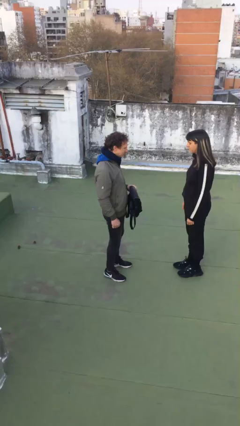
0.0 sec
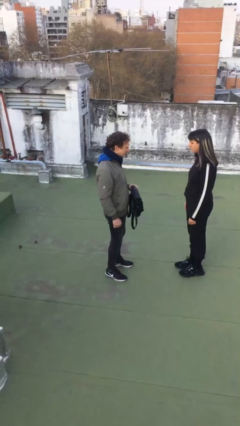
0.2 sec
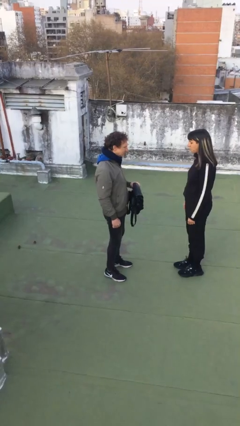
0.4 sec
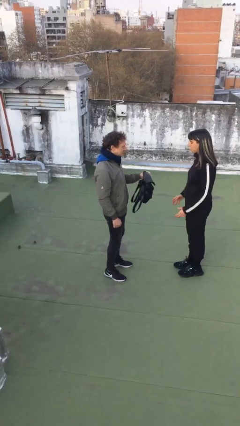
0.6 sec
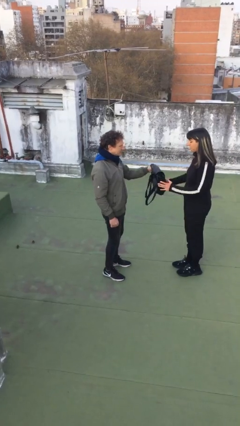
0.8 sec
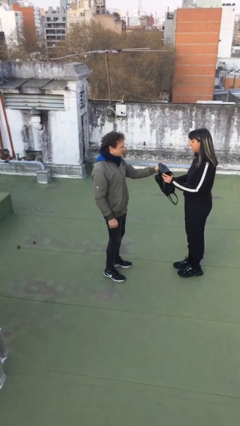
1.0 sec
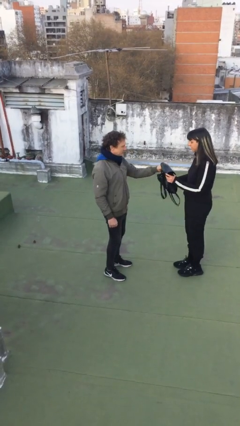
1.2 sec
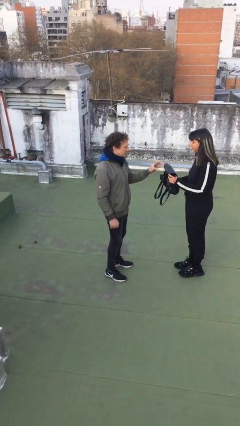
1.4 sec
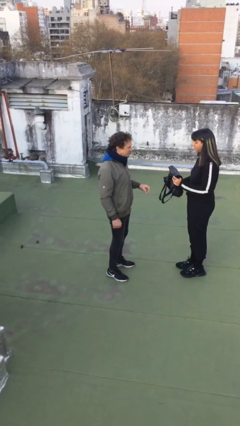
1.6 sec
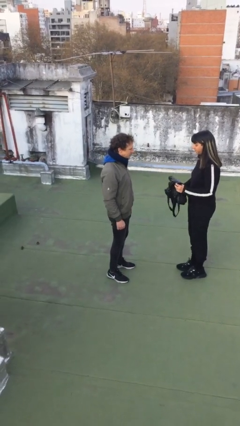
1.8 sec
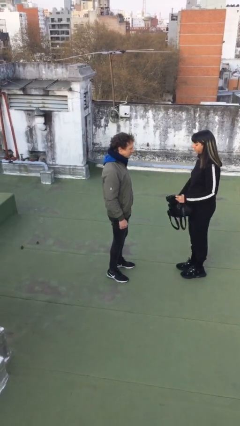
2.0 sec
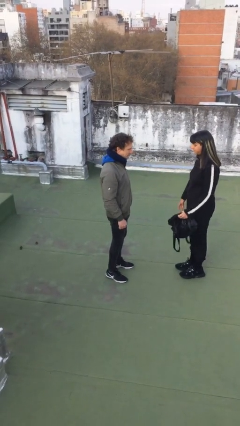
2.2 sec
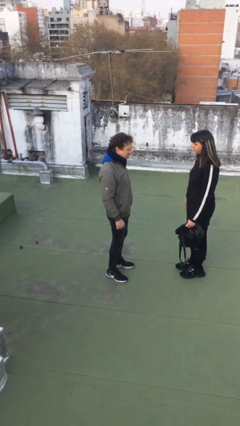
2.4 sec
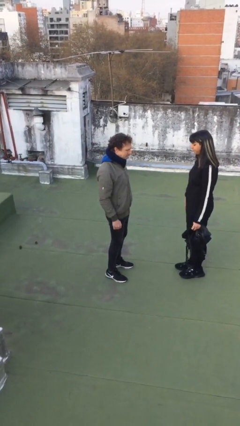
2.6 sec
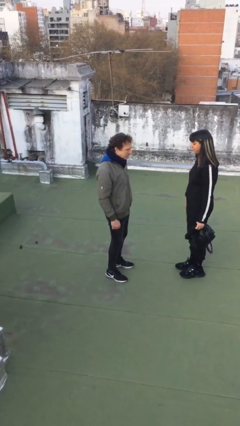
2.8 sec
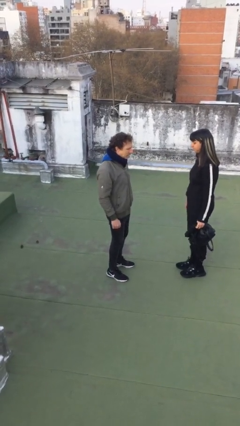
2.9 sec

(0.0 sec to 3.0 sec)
person transfers object to person

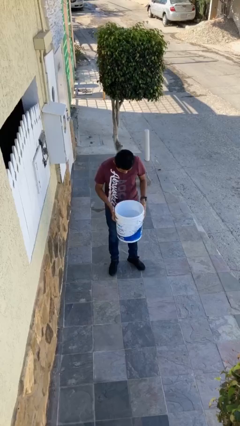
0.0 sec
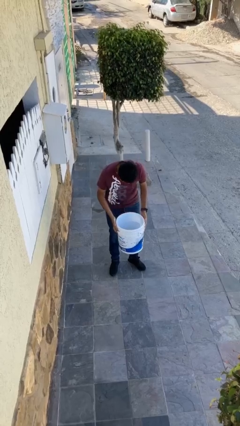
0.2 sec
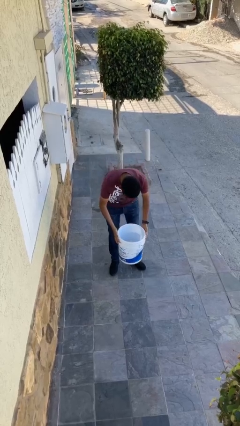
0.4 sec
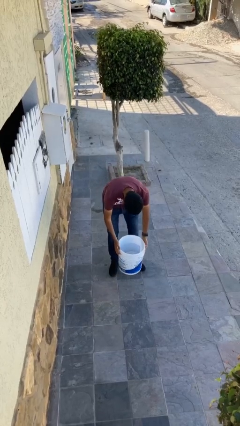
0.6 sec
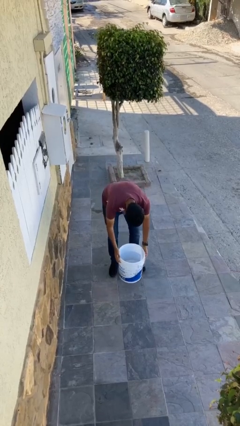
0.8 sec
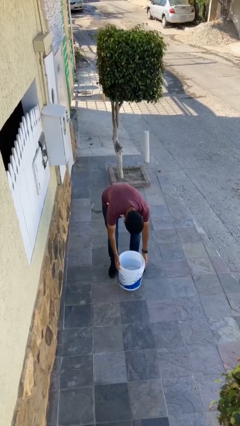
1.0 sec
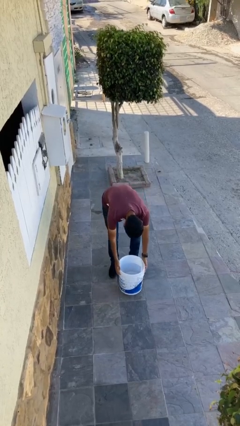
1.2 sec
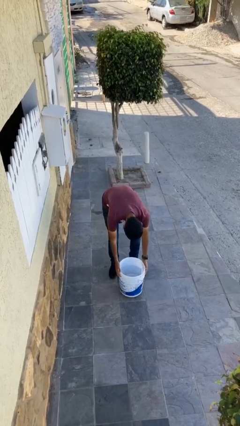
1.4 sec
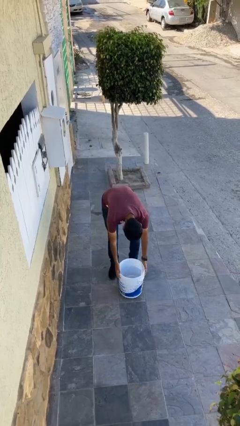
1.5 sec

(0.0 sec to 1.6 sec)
person puts down object on floor

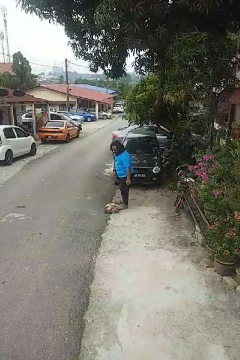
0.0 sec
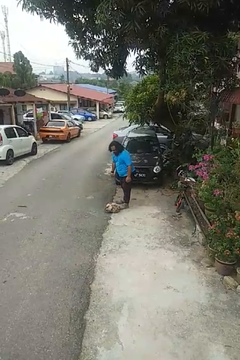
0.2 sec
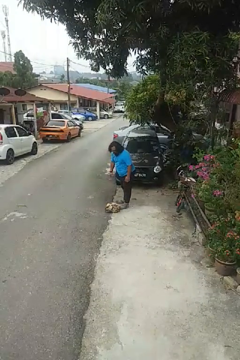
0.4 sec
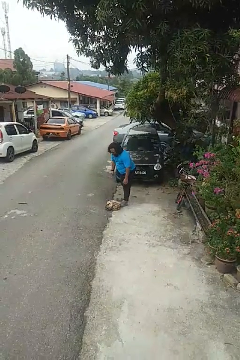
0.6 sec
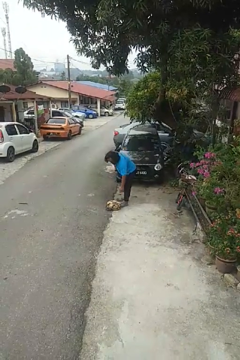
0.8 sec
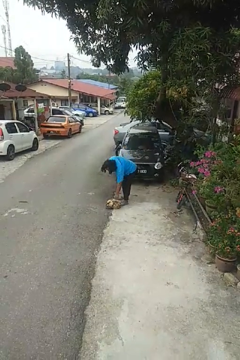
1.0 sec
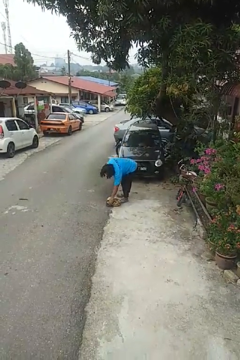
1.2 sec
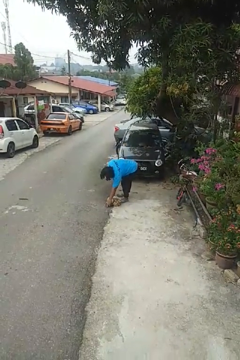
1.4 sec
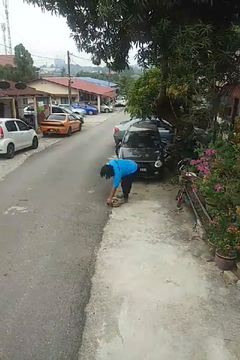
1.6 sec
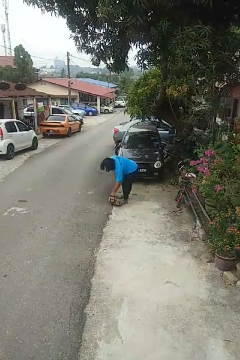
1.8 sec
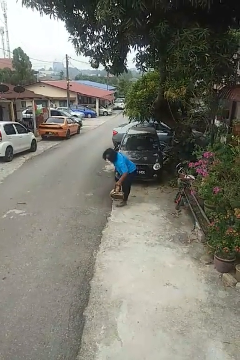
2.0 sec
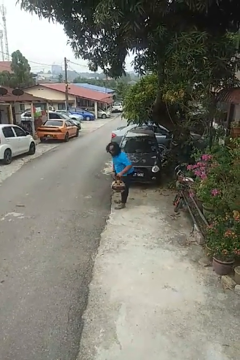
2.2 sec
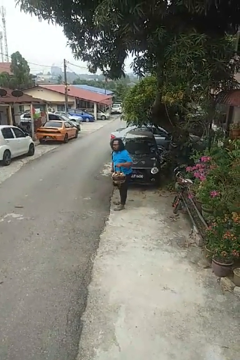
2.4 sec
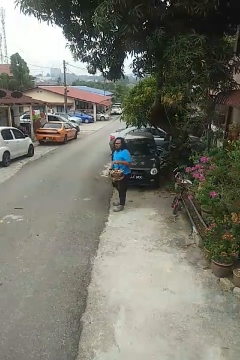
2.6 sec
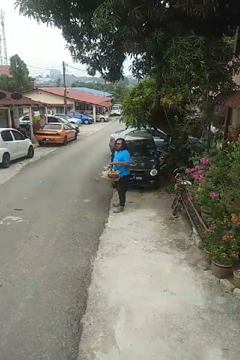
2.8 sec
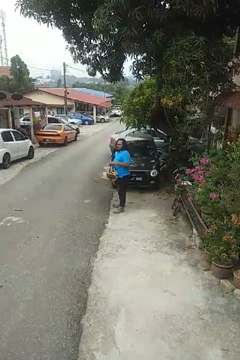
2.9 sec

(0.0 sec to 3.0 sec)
person picks up object from floor

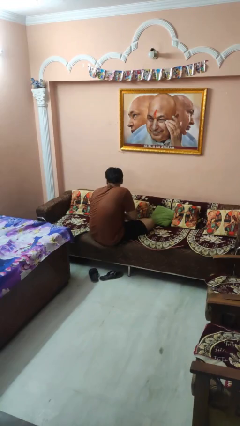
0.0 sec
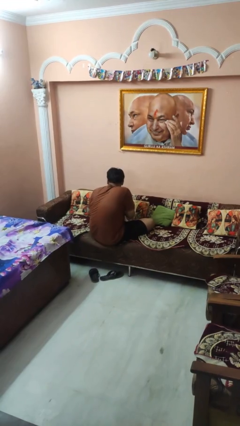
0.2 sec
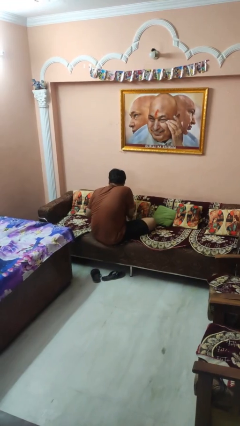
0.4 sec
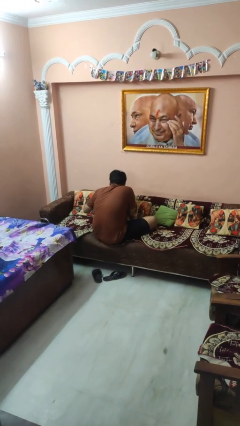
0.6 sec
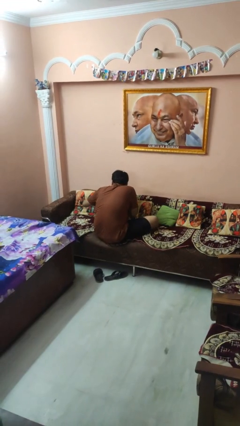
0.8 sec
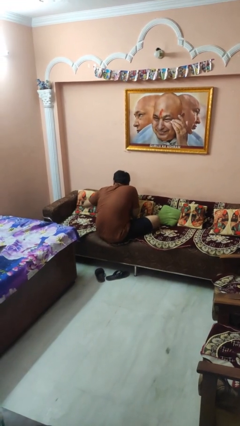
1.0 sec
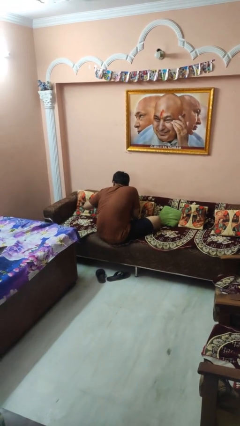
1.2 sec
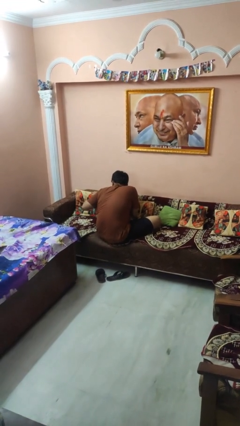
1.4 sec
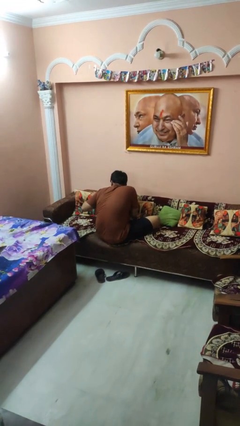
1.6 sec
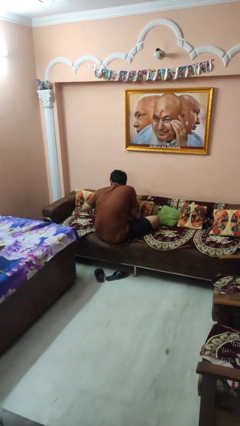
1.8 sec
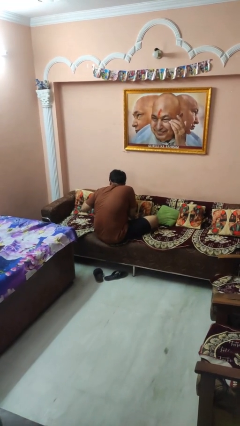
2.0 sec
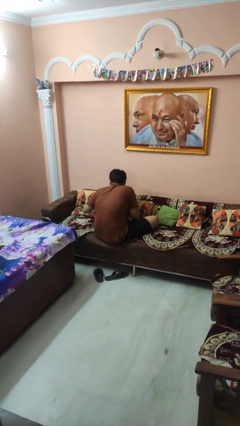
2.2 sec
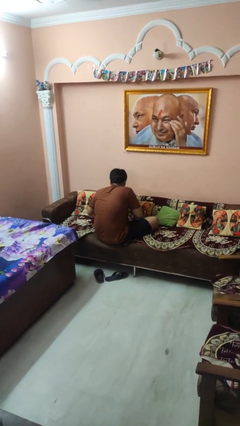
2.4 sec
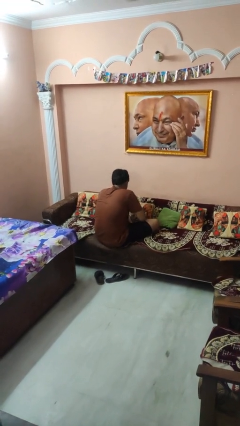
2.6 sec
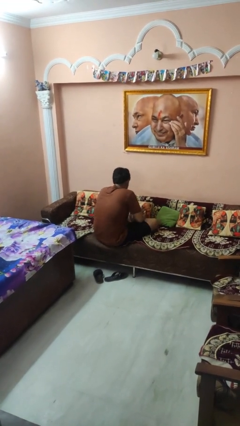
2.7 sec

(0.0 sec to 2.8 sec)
person searches in couch

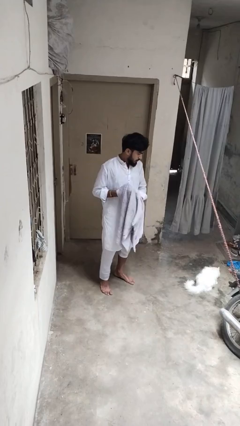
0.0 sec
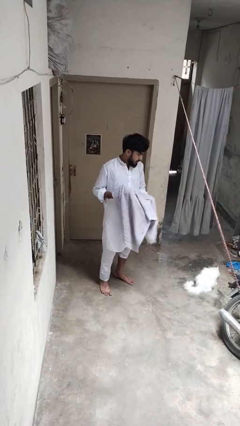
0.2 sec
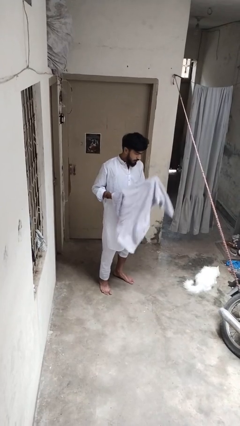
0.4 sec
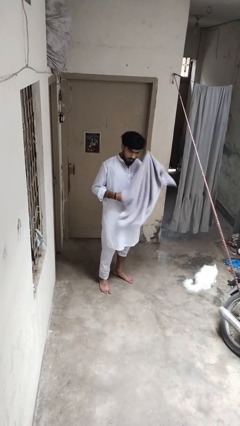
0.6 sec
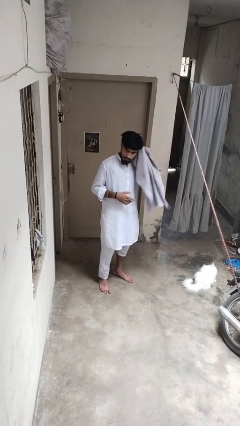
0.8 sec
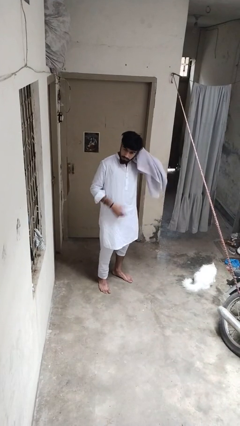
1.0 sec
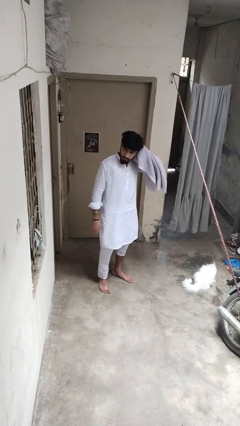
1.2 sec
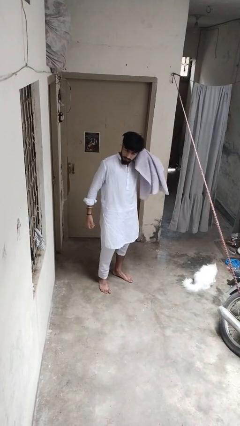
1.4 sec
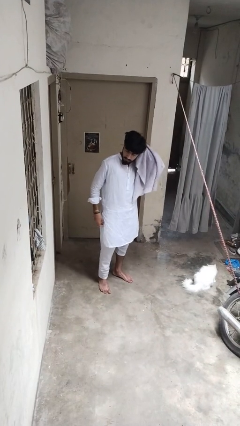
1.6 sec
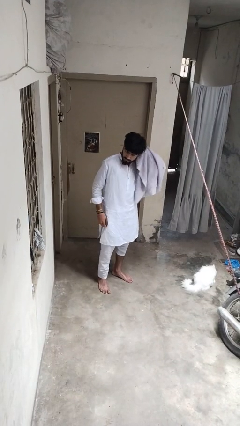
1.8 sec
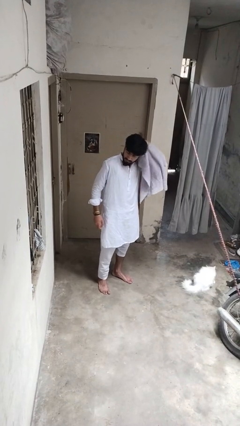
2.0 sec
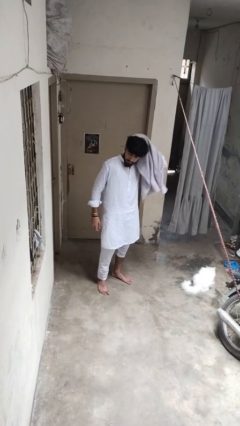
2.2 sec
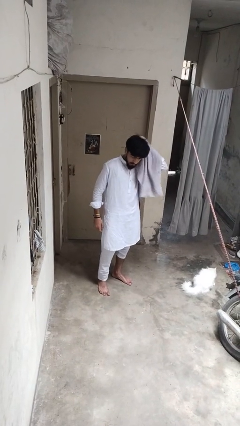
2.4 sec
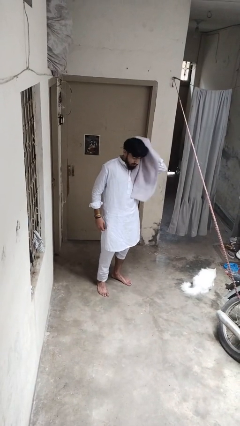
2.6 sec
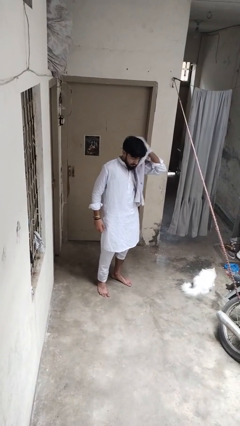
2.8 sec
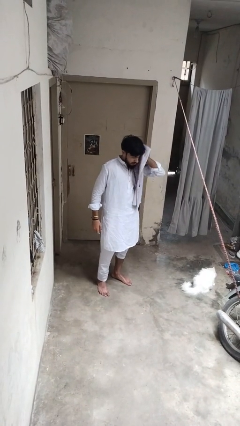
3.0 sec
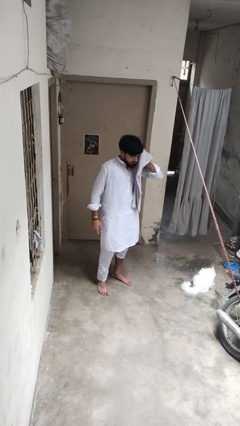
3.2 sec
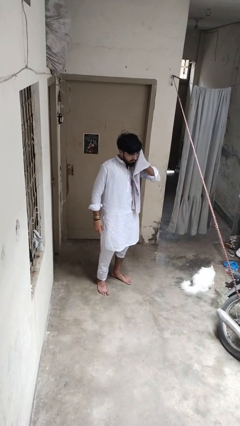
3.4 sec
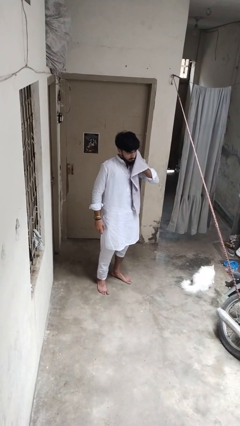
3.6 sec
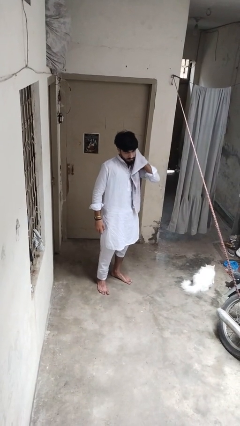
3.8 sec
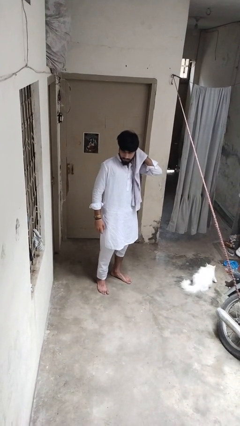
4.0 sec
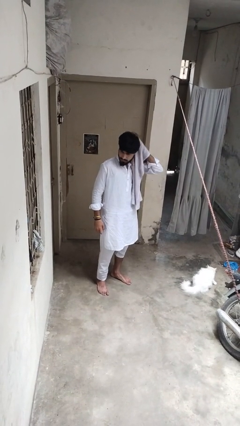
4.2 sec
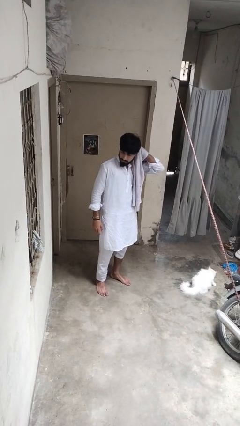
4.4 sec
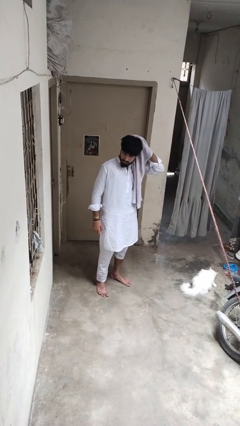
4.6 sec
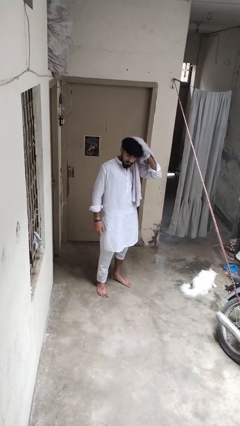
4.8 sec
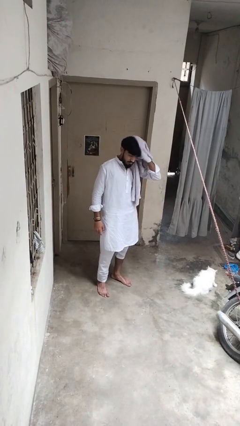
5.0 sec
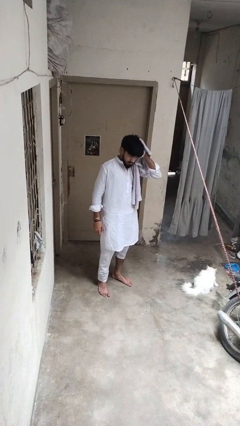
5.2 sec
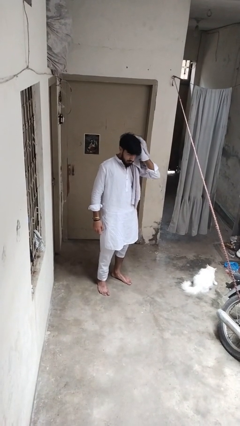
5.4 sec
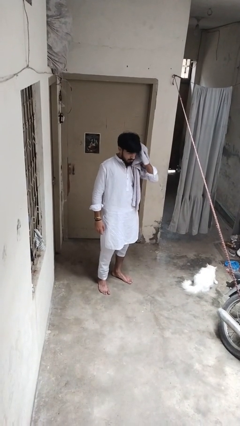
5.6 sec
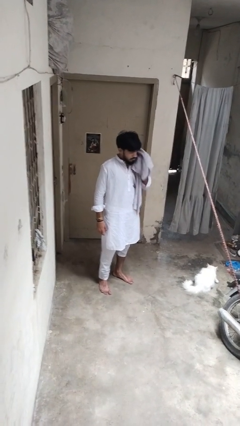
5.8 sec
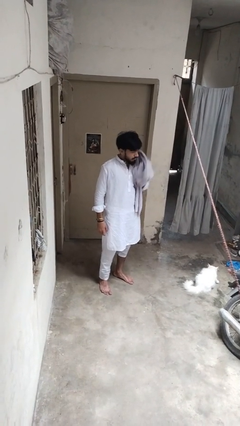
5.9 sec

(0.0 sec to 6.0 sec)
person dries hair with towel

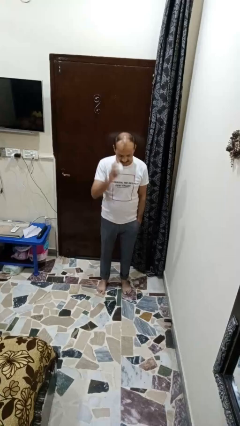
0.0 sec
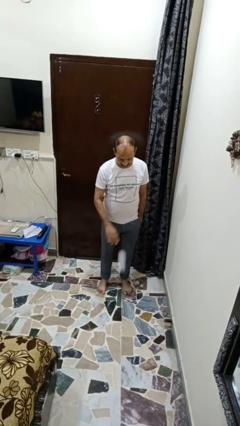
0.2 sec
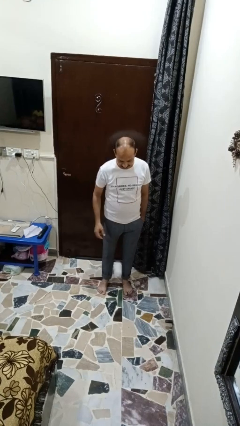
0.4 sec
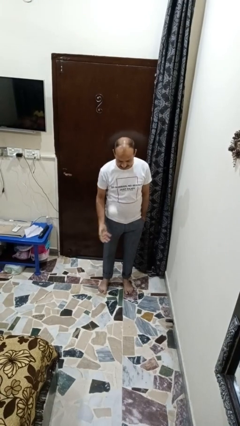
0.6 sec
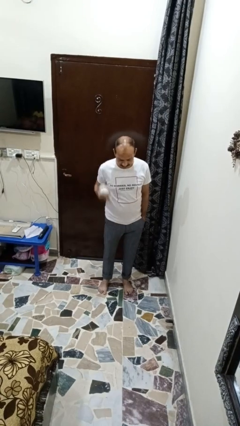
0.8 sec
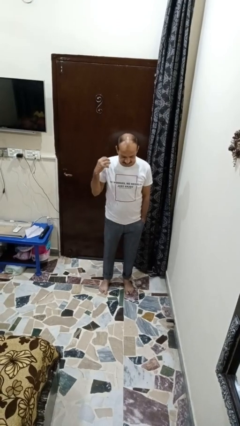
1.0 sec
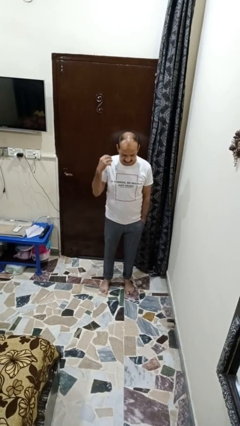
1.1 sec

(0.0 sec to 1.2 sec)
person bounces ball on floor

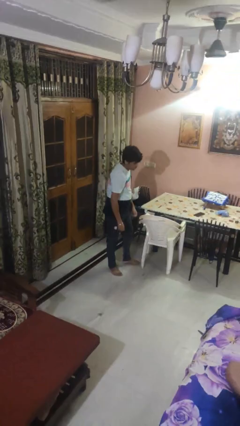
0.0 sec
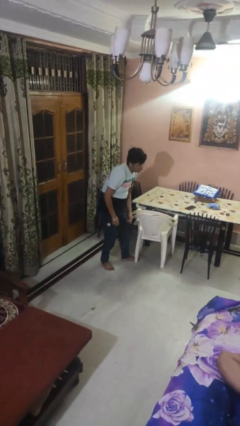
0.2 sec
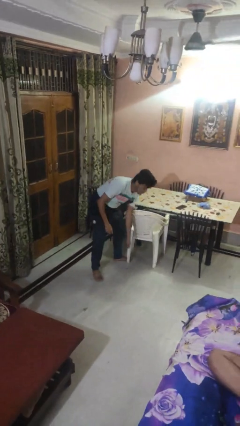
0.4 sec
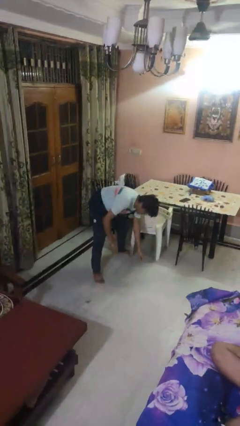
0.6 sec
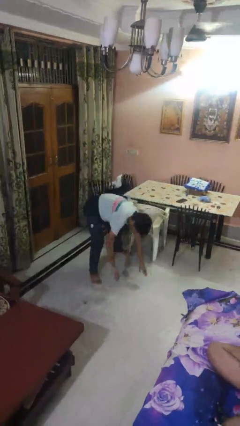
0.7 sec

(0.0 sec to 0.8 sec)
person trips on object on floor
